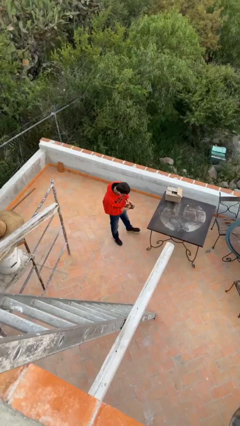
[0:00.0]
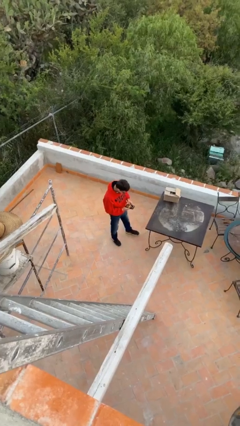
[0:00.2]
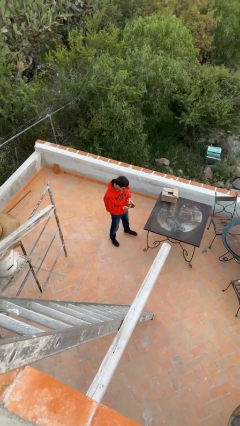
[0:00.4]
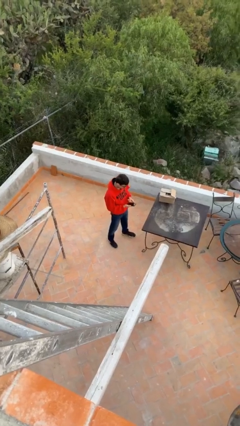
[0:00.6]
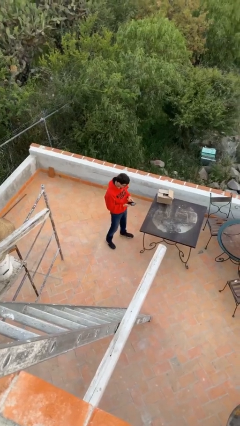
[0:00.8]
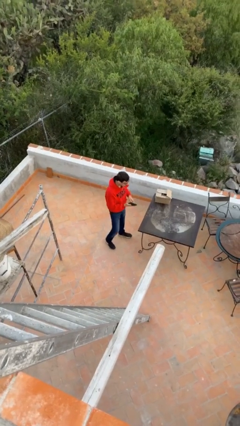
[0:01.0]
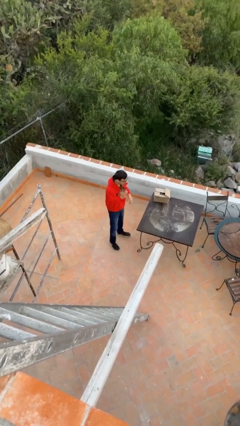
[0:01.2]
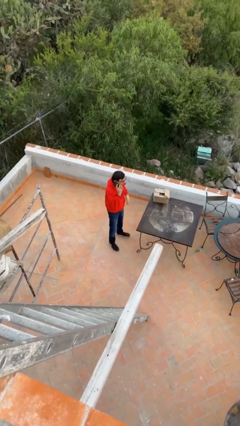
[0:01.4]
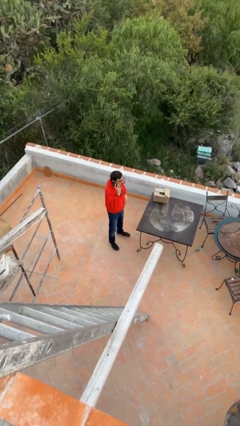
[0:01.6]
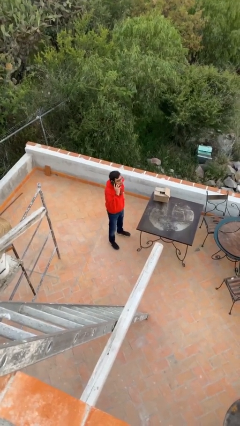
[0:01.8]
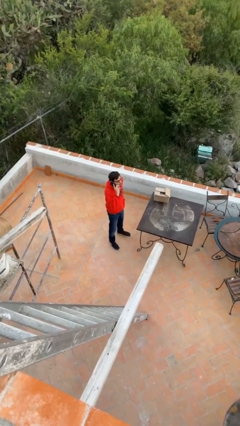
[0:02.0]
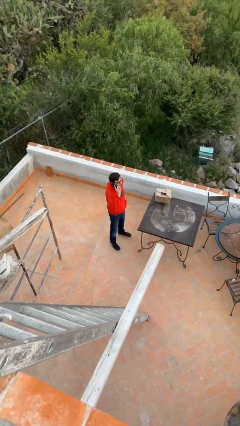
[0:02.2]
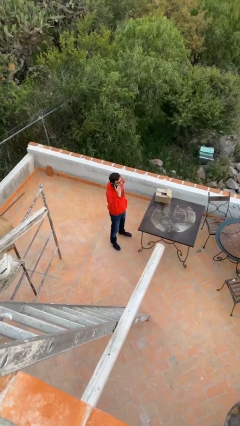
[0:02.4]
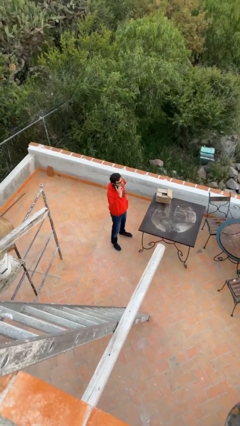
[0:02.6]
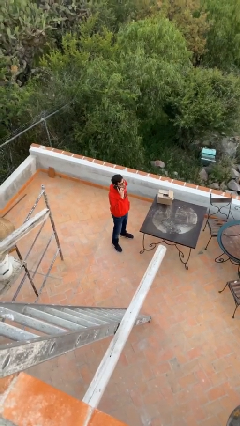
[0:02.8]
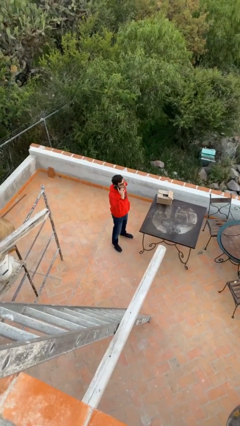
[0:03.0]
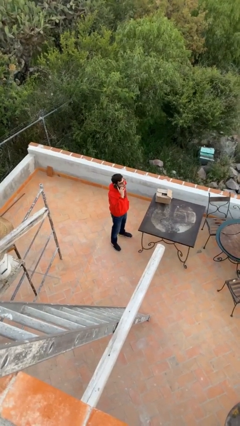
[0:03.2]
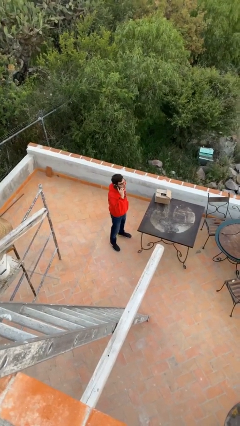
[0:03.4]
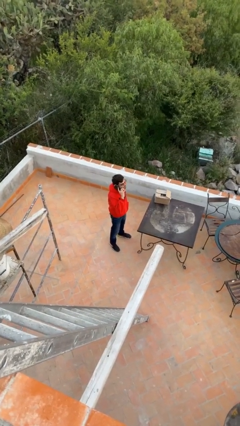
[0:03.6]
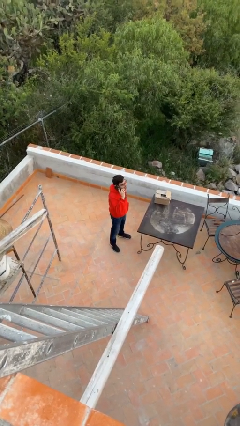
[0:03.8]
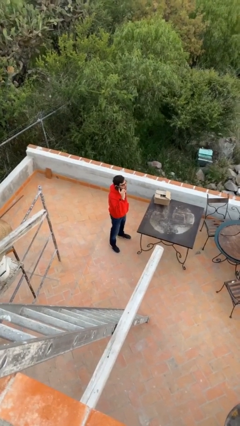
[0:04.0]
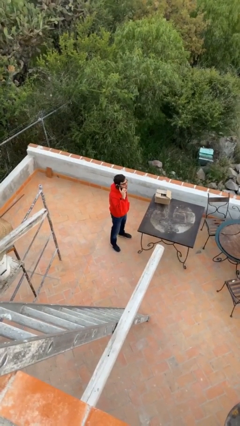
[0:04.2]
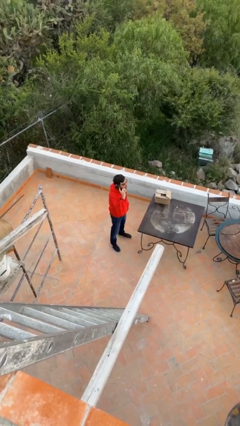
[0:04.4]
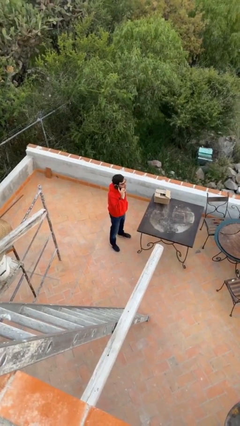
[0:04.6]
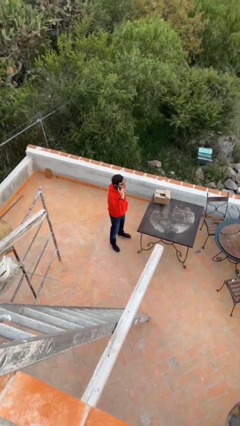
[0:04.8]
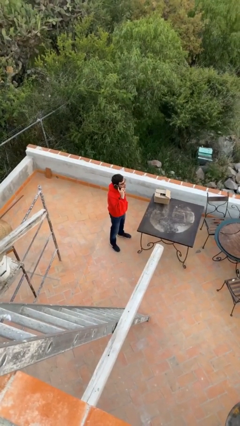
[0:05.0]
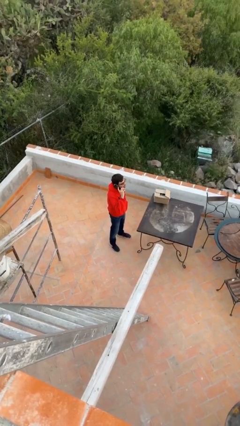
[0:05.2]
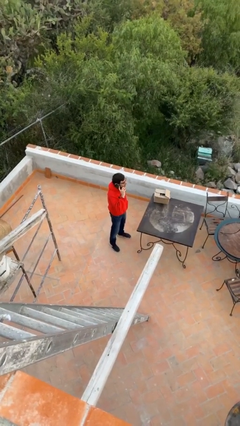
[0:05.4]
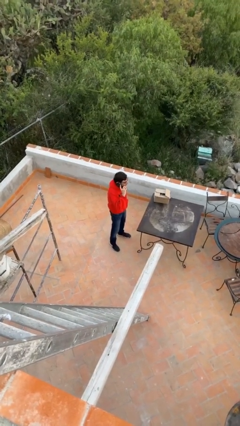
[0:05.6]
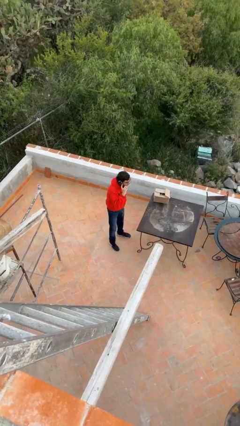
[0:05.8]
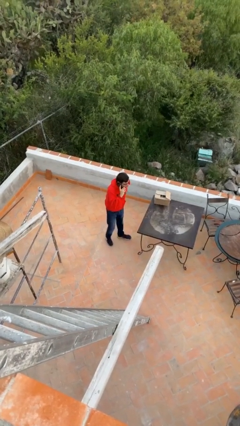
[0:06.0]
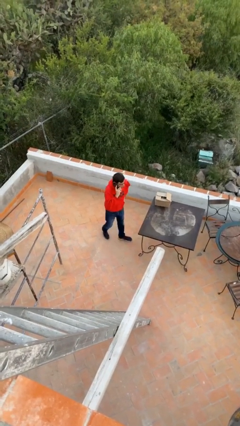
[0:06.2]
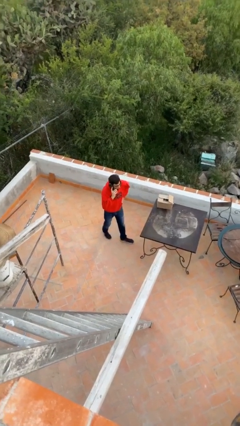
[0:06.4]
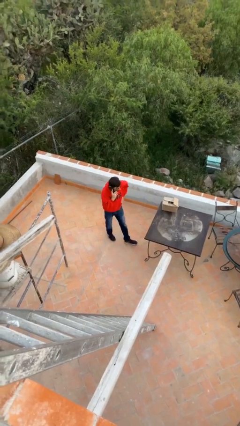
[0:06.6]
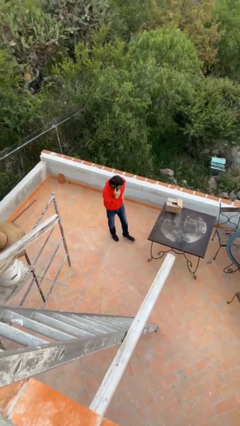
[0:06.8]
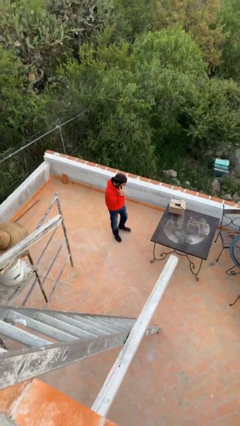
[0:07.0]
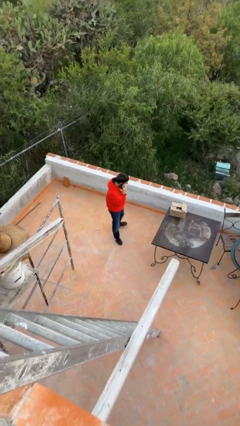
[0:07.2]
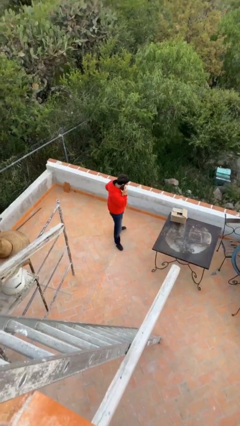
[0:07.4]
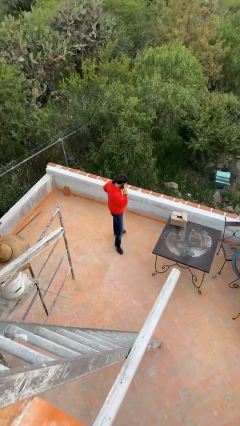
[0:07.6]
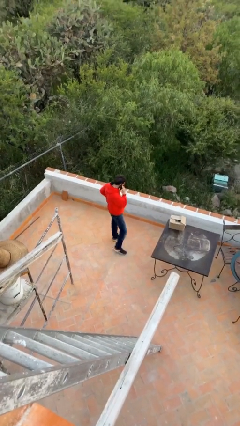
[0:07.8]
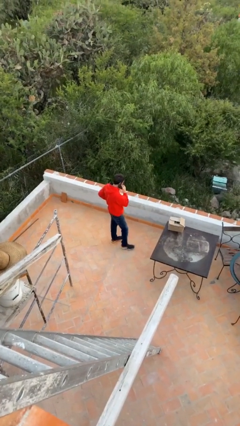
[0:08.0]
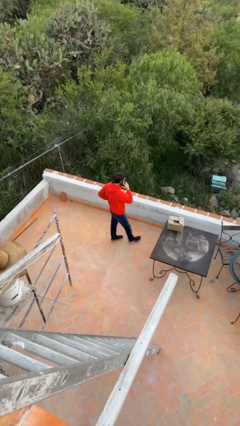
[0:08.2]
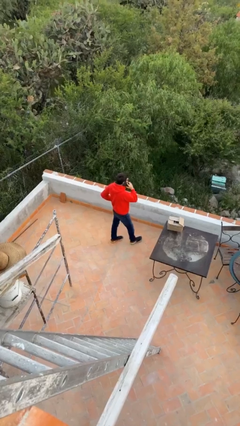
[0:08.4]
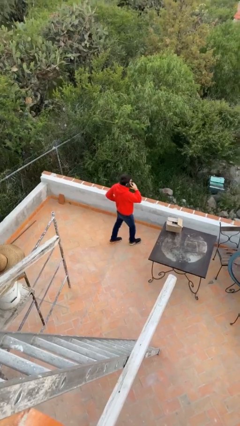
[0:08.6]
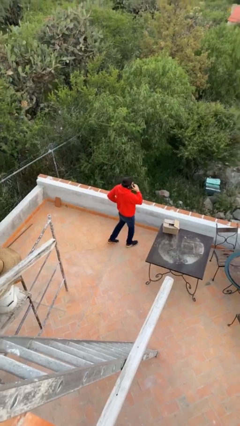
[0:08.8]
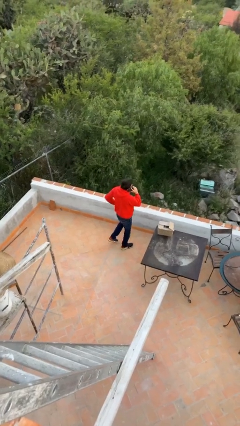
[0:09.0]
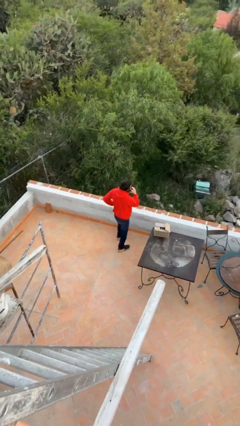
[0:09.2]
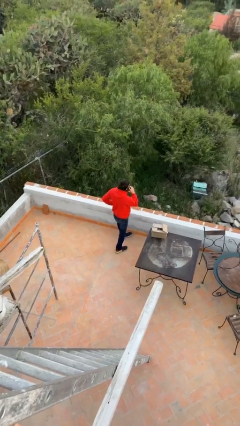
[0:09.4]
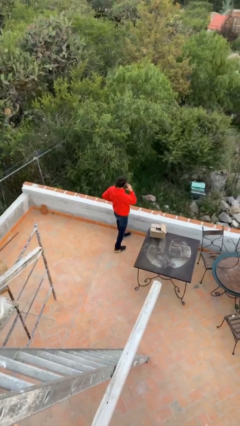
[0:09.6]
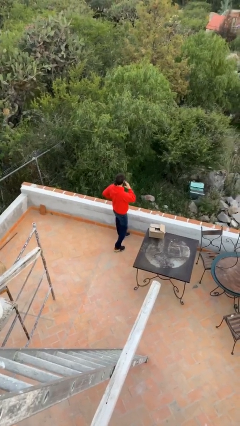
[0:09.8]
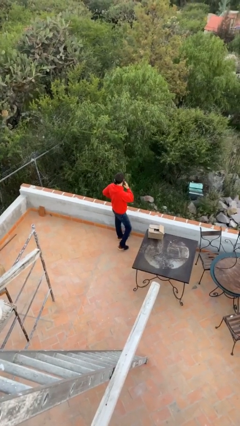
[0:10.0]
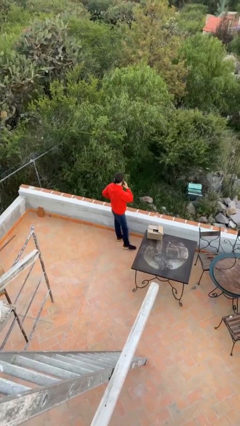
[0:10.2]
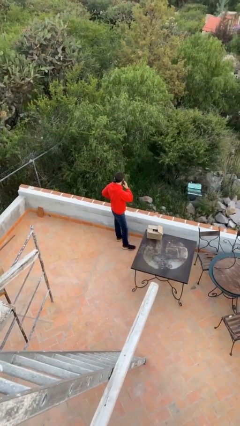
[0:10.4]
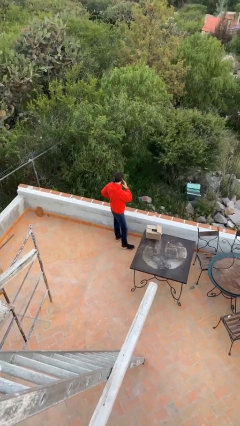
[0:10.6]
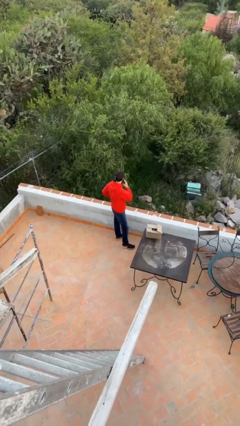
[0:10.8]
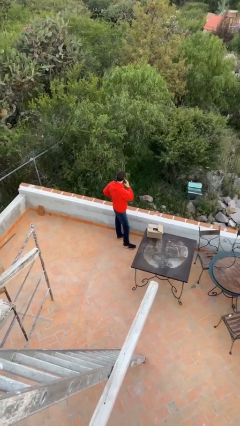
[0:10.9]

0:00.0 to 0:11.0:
person talks on phone

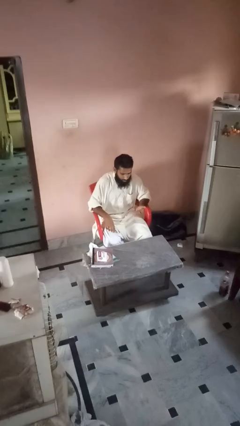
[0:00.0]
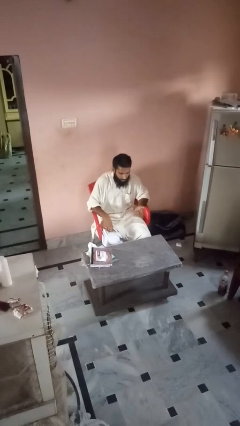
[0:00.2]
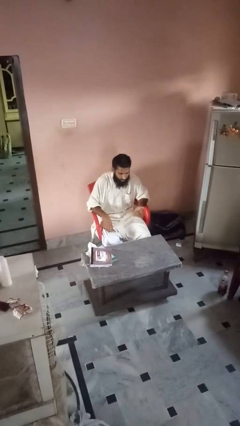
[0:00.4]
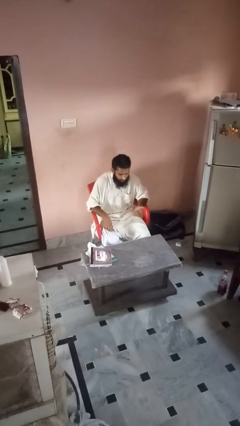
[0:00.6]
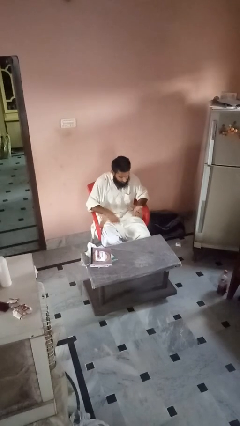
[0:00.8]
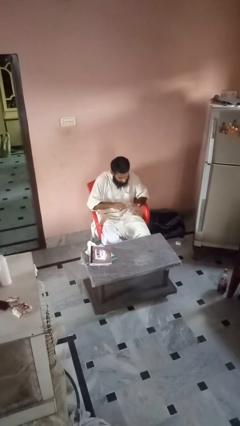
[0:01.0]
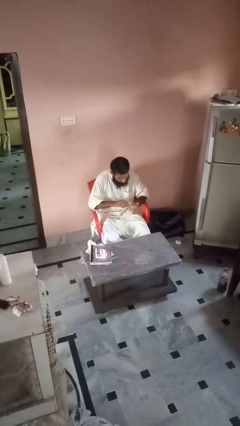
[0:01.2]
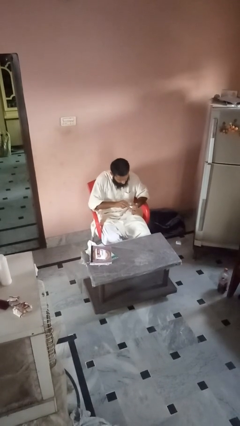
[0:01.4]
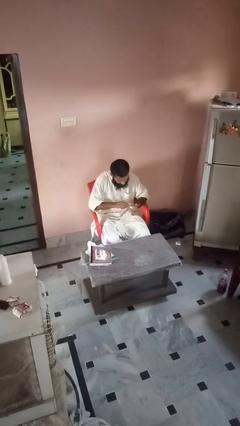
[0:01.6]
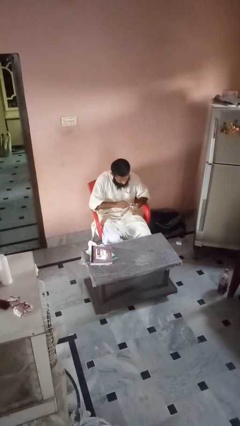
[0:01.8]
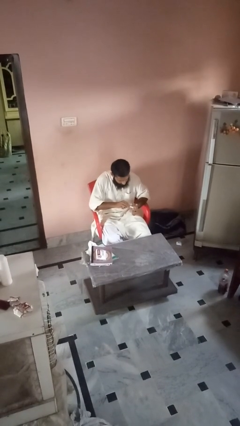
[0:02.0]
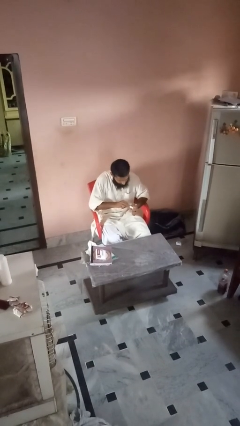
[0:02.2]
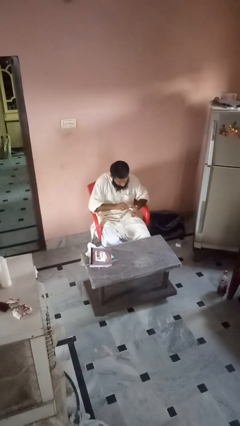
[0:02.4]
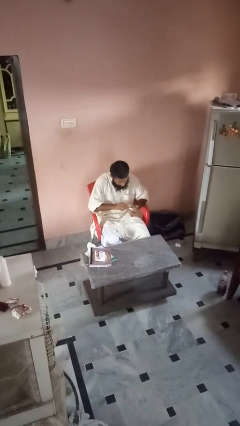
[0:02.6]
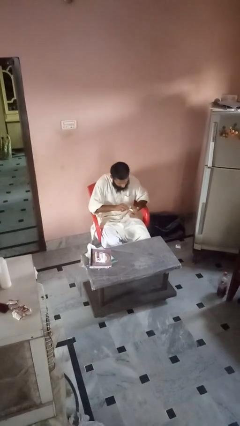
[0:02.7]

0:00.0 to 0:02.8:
person clips fingernails

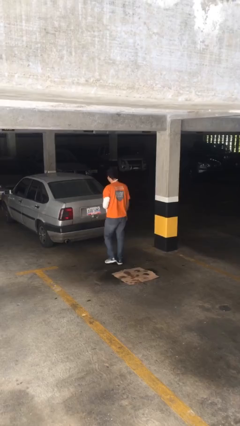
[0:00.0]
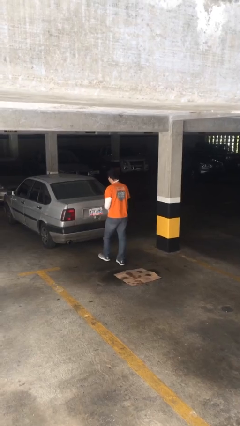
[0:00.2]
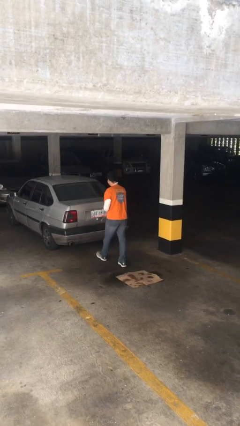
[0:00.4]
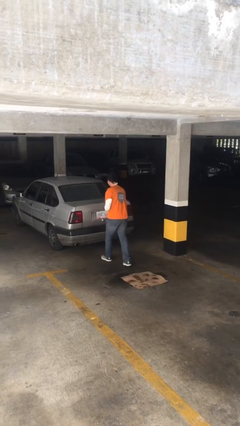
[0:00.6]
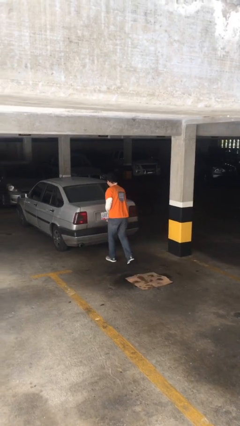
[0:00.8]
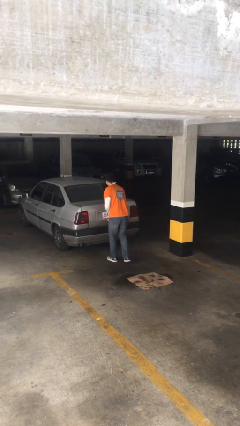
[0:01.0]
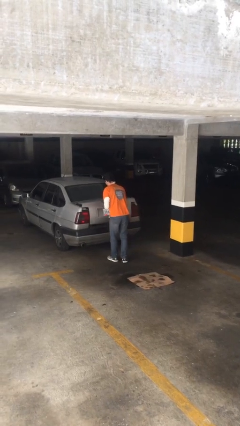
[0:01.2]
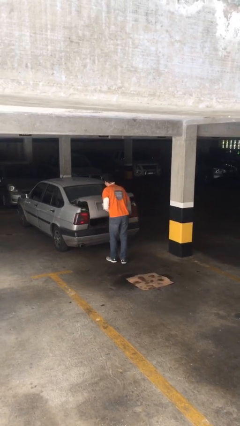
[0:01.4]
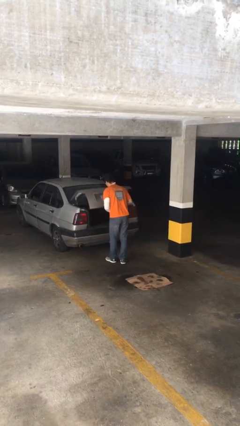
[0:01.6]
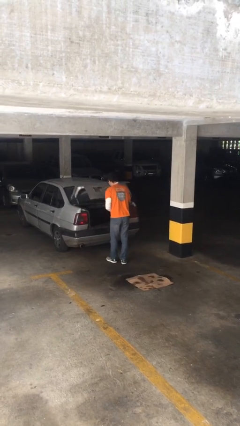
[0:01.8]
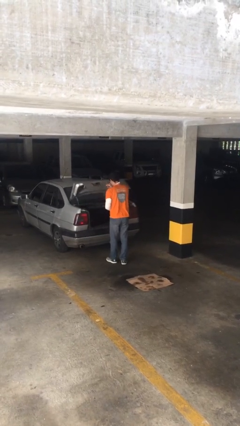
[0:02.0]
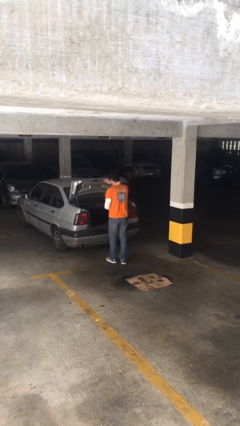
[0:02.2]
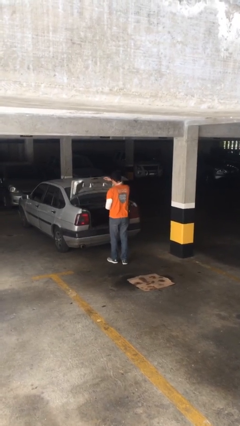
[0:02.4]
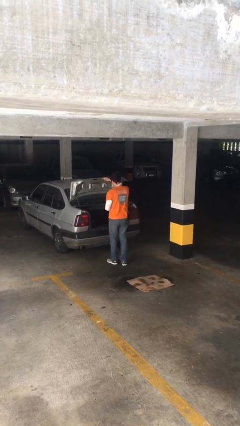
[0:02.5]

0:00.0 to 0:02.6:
person opens car trunk

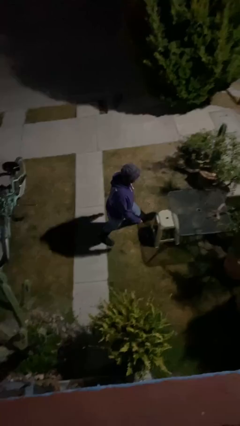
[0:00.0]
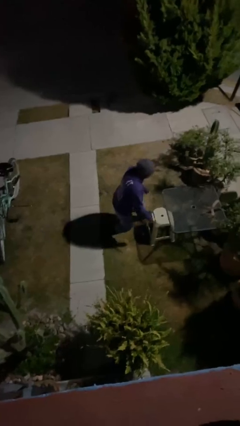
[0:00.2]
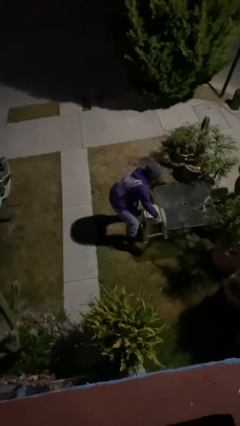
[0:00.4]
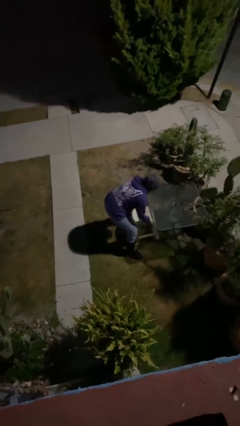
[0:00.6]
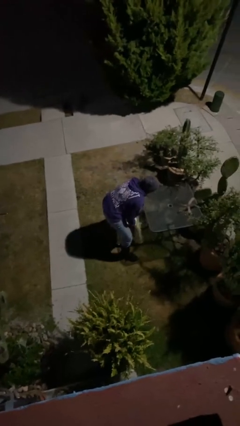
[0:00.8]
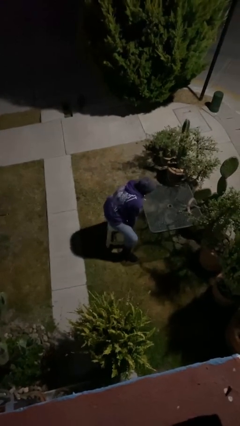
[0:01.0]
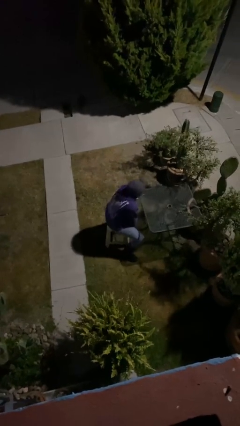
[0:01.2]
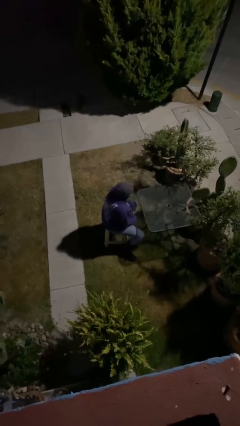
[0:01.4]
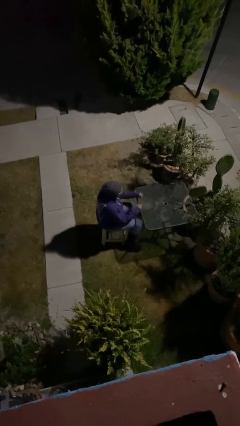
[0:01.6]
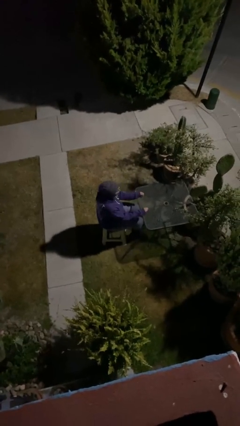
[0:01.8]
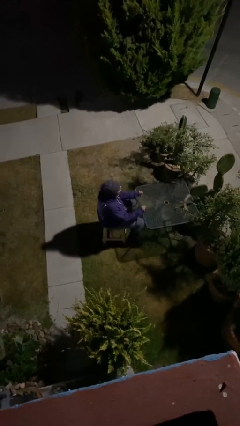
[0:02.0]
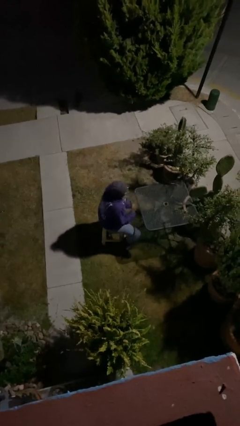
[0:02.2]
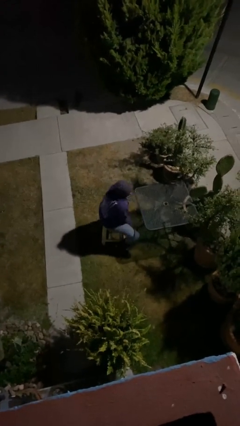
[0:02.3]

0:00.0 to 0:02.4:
person sits down
